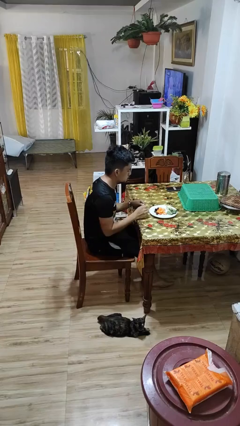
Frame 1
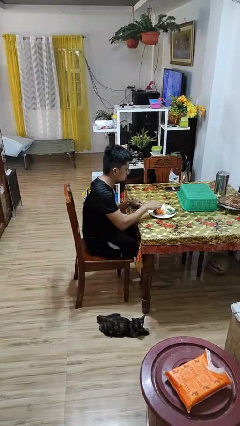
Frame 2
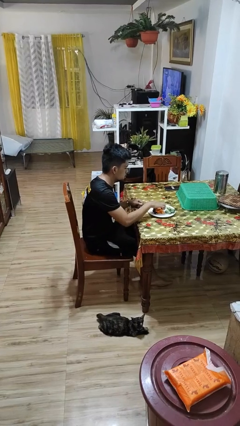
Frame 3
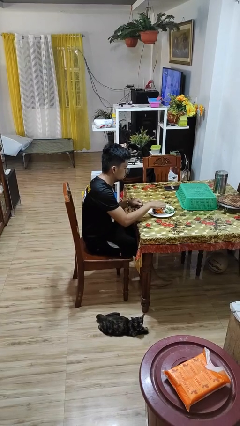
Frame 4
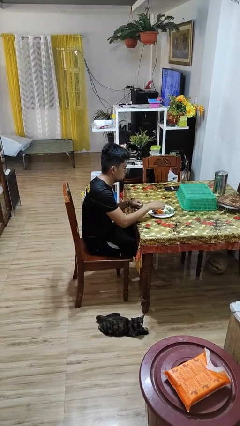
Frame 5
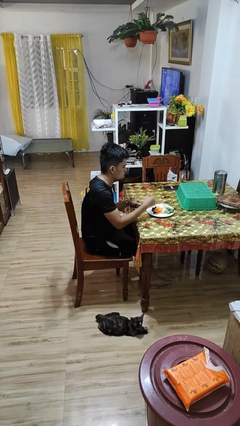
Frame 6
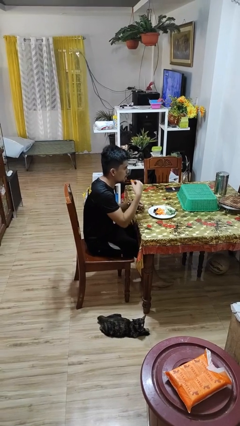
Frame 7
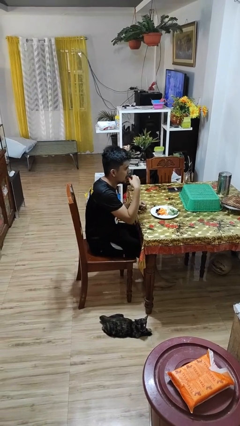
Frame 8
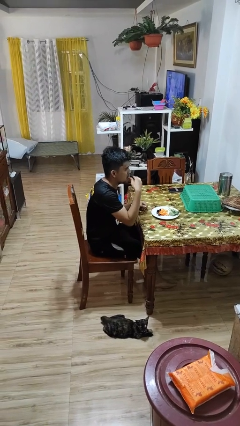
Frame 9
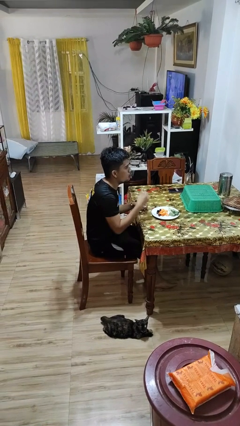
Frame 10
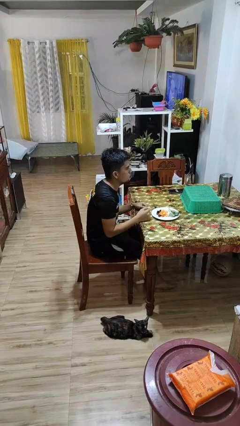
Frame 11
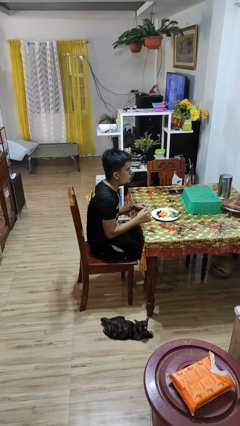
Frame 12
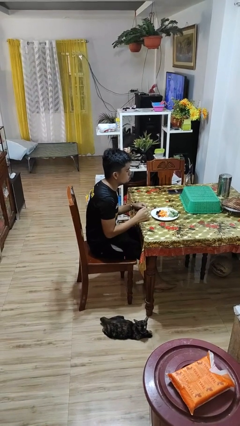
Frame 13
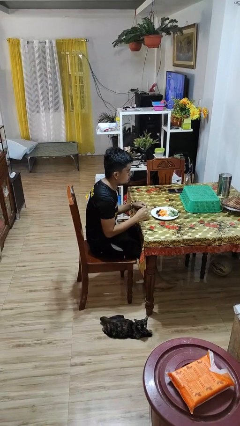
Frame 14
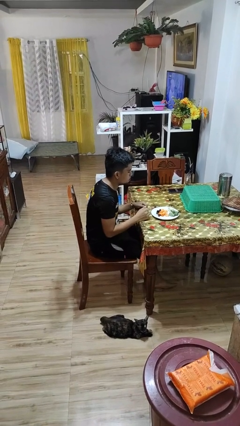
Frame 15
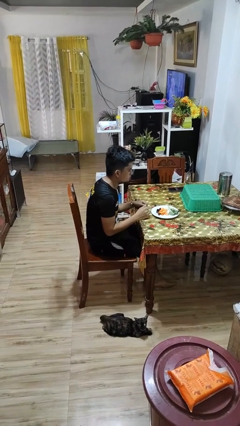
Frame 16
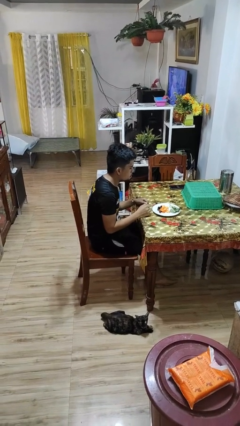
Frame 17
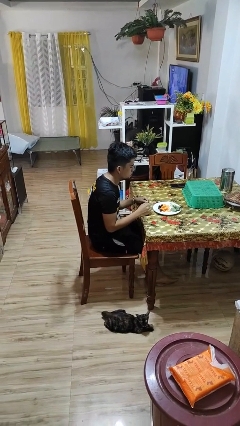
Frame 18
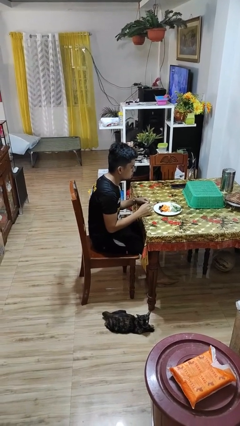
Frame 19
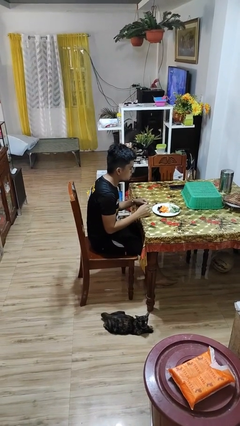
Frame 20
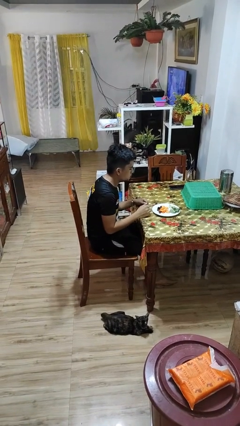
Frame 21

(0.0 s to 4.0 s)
person eats with hands

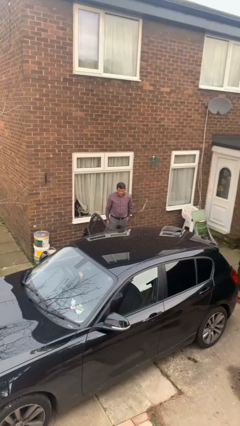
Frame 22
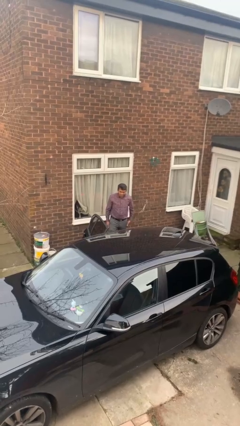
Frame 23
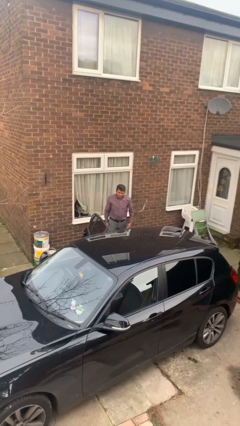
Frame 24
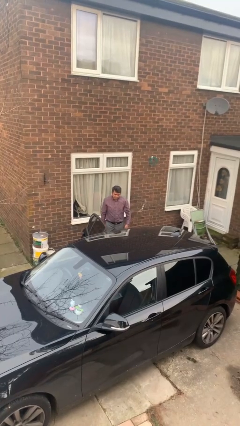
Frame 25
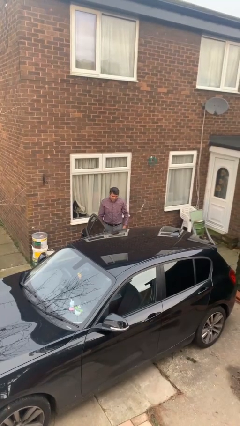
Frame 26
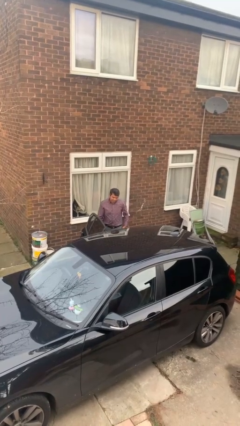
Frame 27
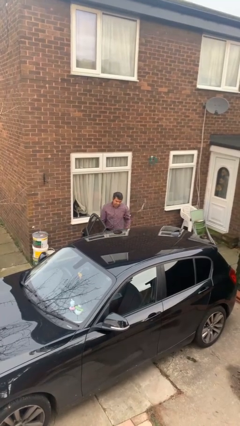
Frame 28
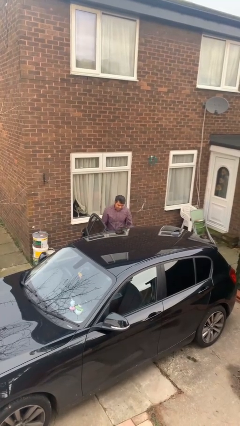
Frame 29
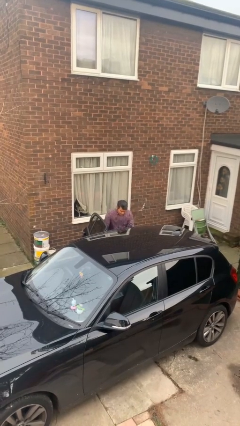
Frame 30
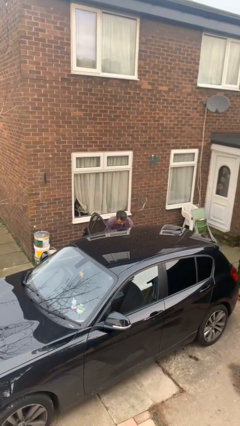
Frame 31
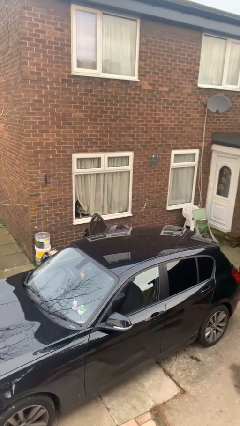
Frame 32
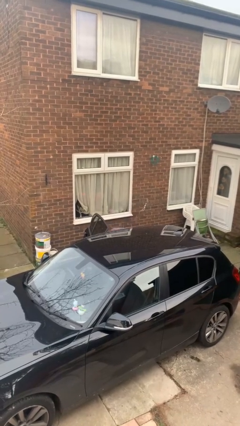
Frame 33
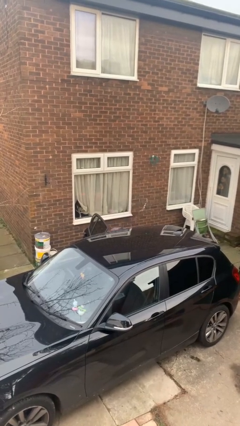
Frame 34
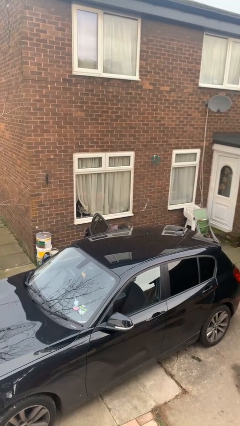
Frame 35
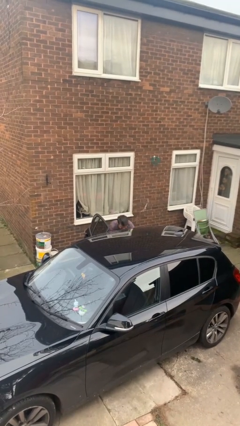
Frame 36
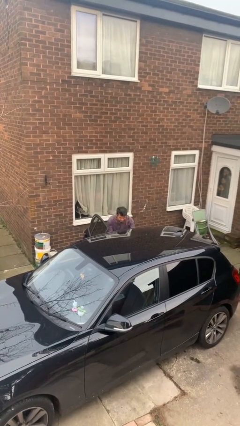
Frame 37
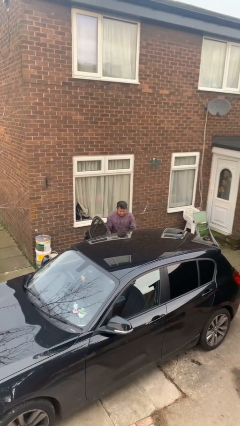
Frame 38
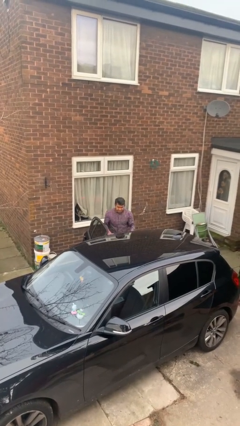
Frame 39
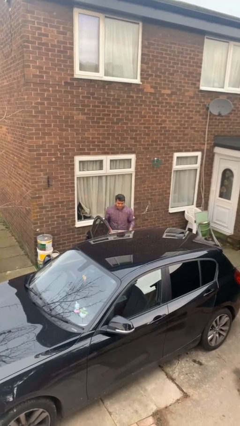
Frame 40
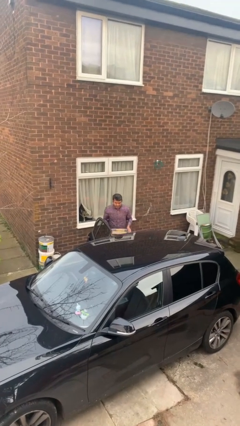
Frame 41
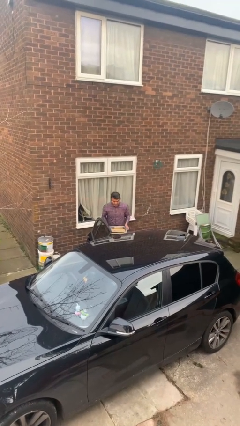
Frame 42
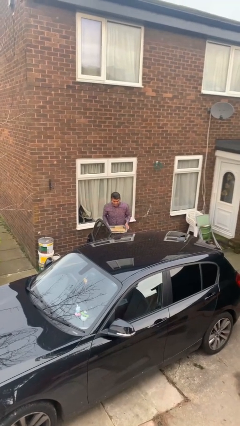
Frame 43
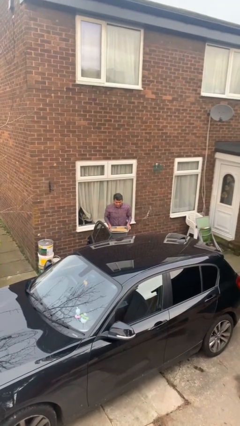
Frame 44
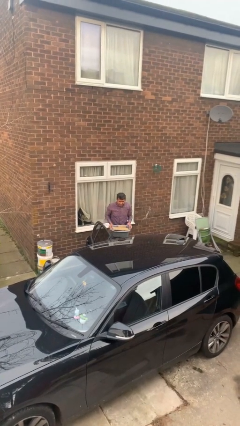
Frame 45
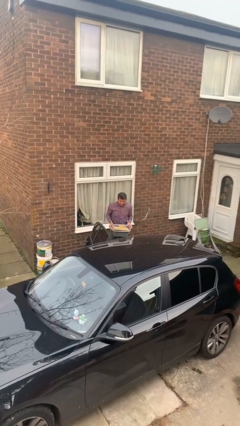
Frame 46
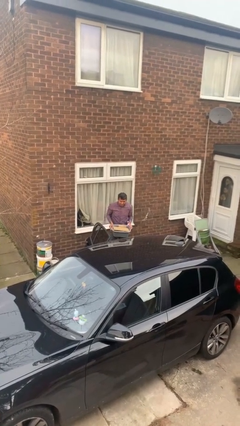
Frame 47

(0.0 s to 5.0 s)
person unloads car

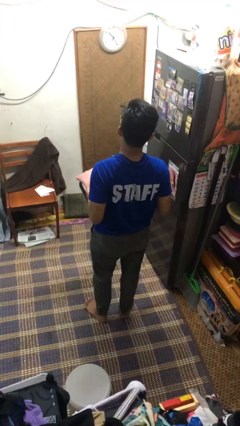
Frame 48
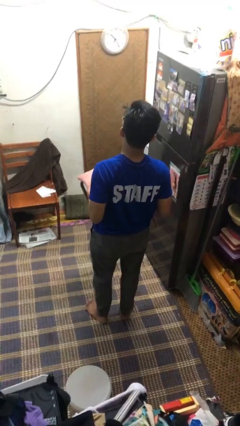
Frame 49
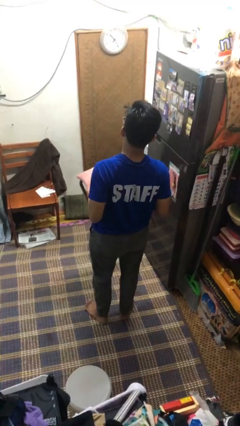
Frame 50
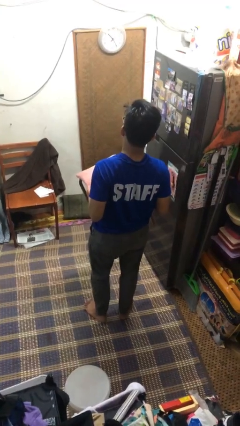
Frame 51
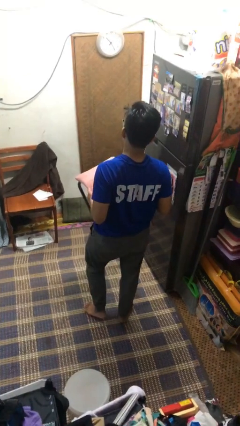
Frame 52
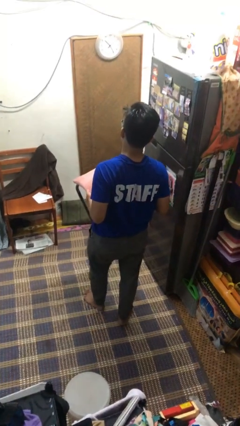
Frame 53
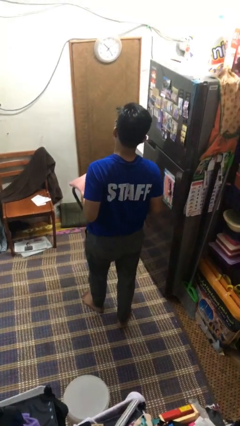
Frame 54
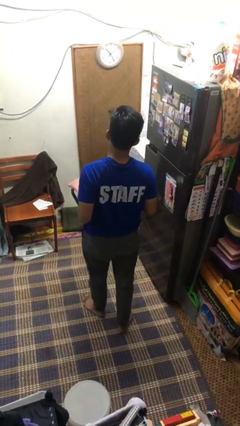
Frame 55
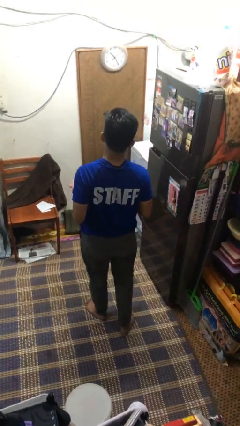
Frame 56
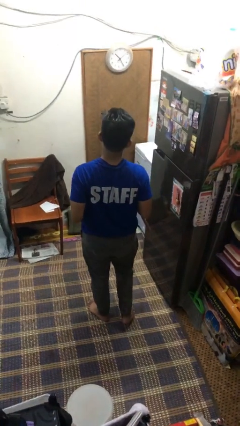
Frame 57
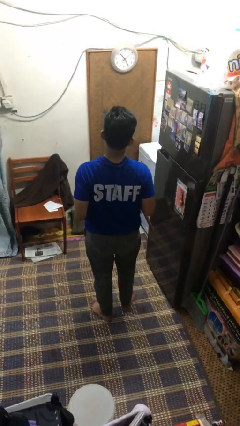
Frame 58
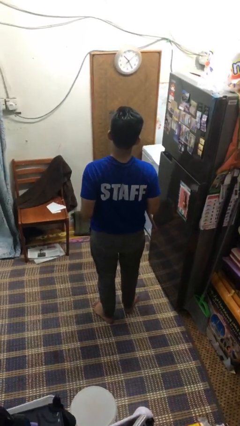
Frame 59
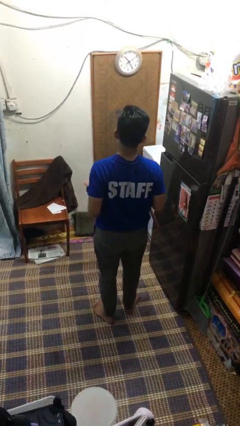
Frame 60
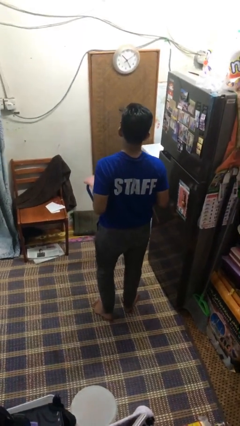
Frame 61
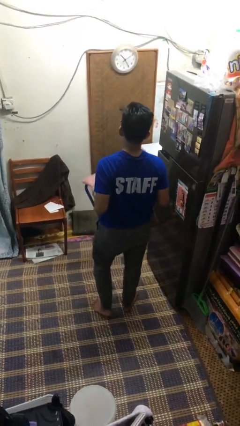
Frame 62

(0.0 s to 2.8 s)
person carries furniture

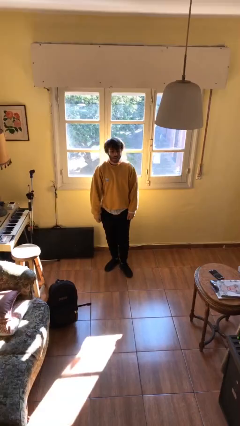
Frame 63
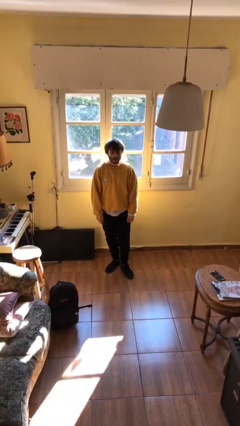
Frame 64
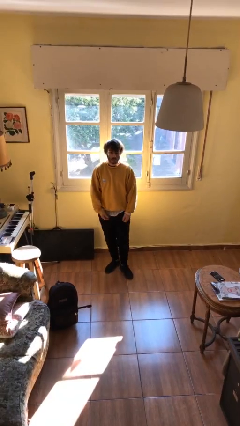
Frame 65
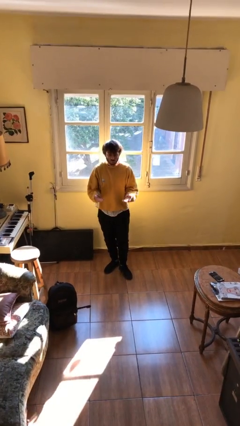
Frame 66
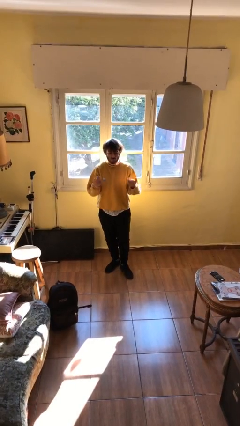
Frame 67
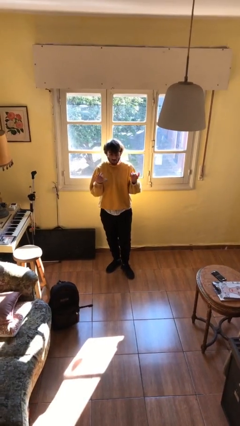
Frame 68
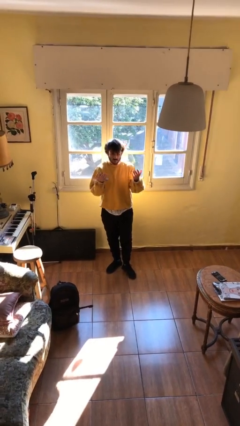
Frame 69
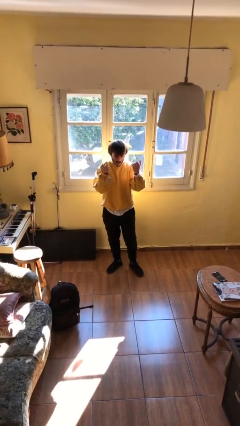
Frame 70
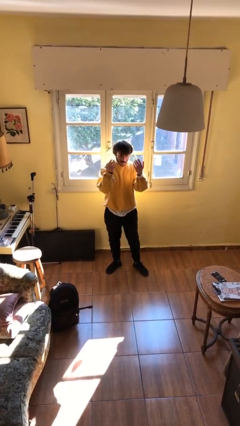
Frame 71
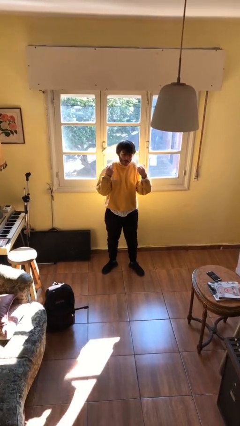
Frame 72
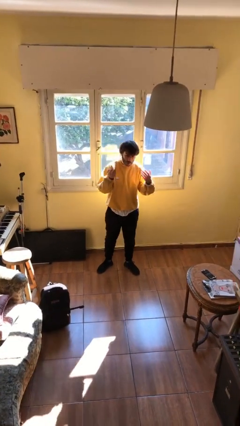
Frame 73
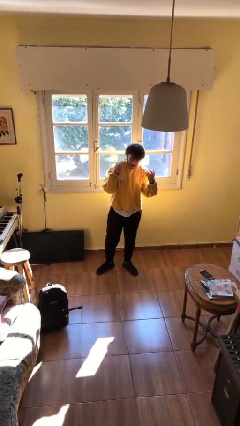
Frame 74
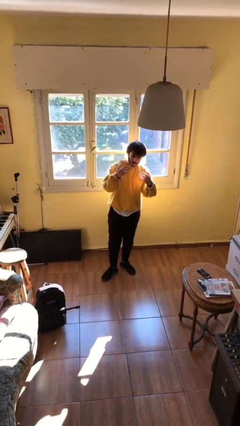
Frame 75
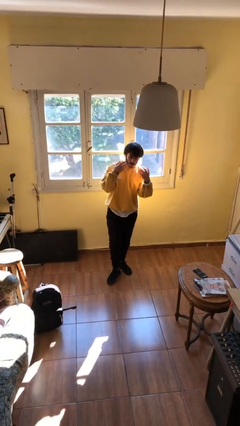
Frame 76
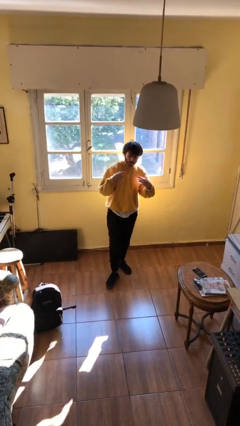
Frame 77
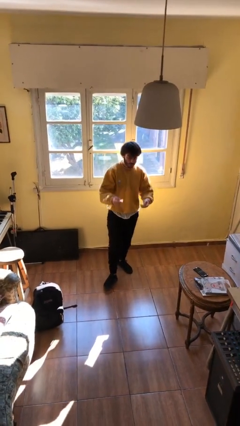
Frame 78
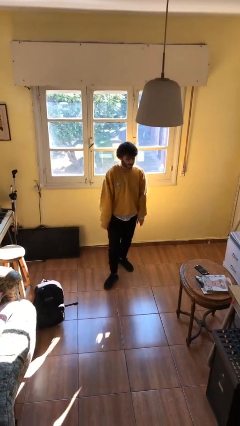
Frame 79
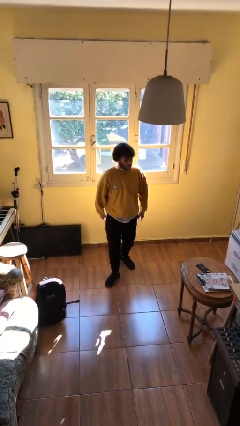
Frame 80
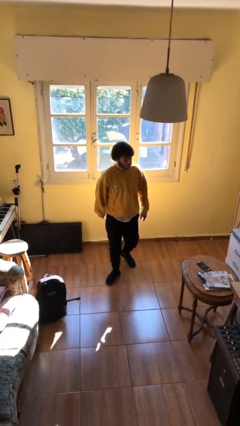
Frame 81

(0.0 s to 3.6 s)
person gestures come here

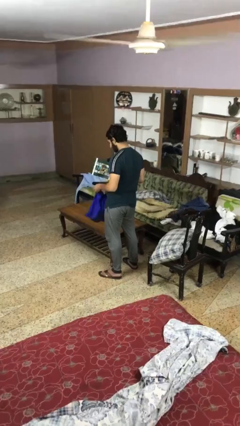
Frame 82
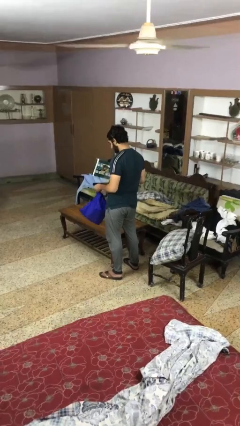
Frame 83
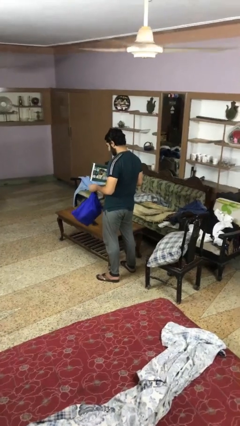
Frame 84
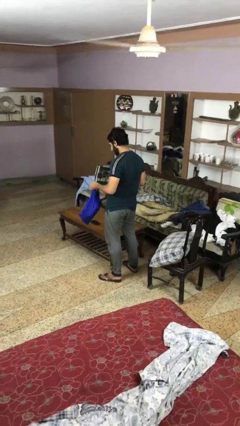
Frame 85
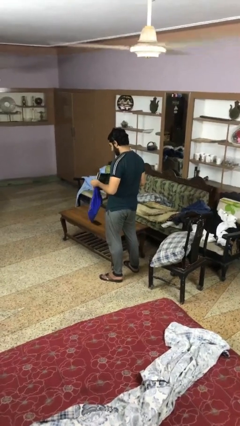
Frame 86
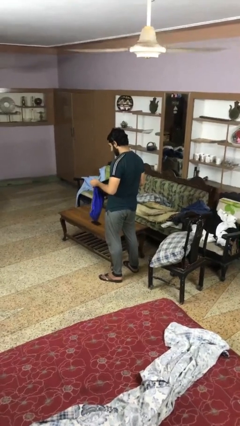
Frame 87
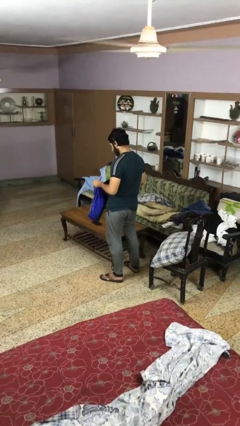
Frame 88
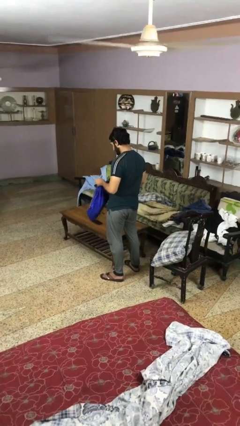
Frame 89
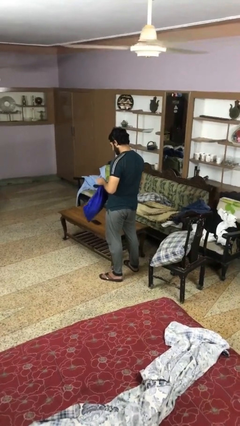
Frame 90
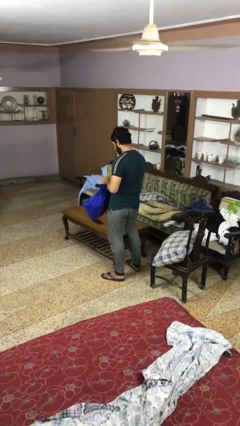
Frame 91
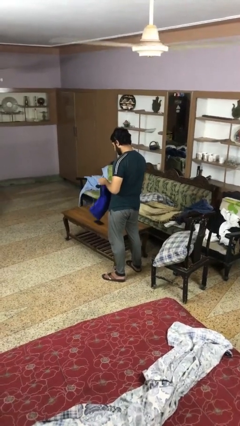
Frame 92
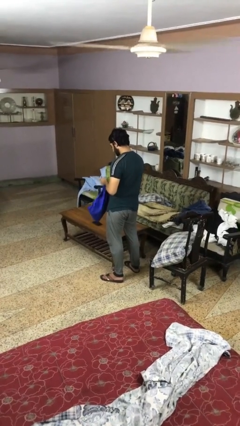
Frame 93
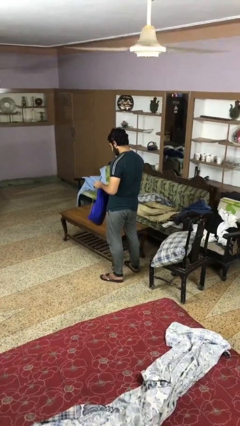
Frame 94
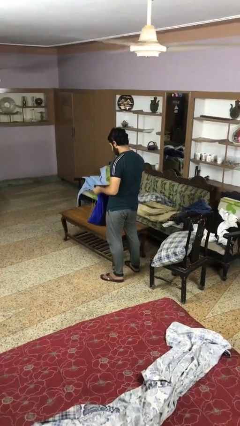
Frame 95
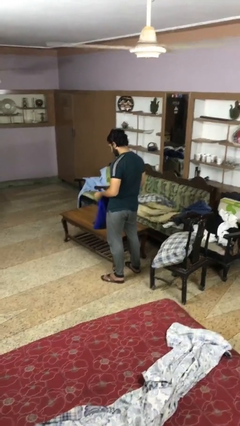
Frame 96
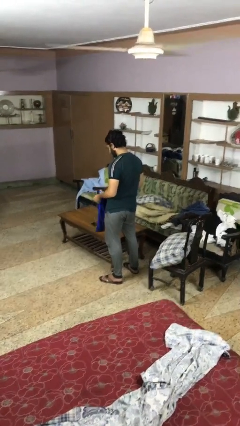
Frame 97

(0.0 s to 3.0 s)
person puts object into bag
